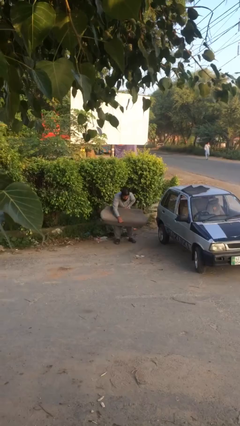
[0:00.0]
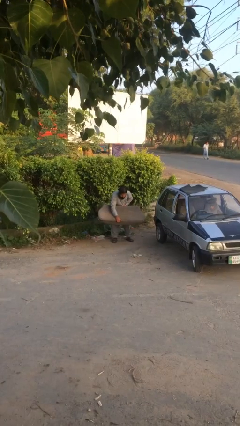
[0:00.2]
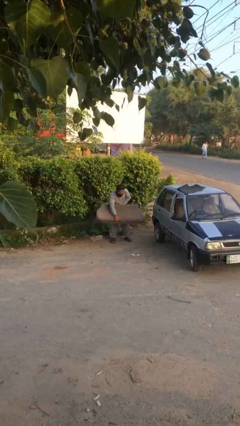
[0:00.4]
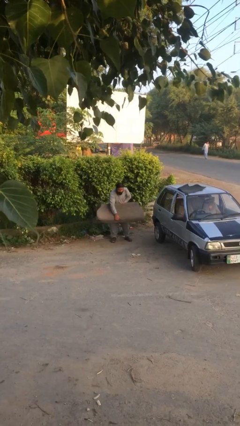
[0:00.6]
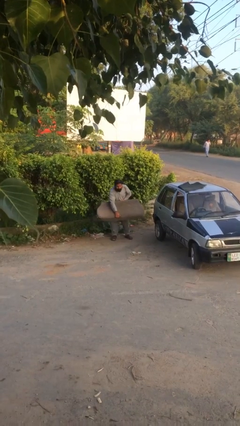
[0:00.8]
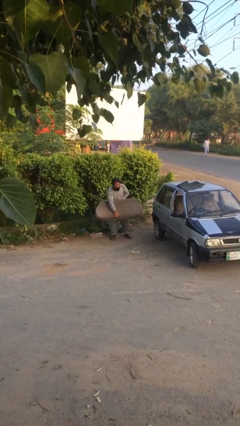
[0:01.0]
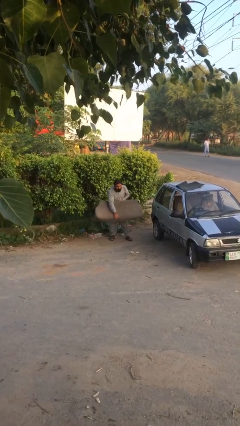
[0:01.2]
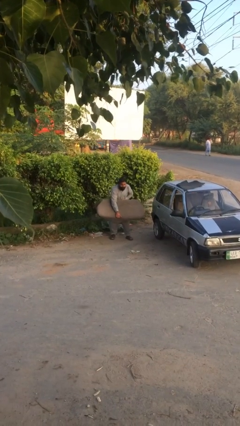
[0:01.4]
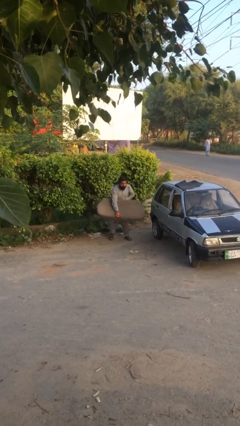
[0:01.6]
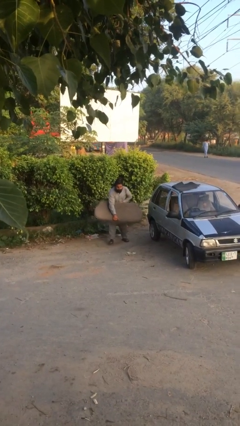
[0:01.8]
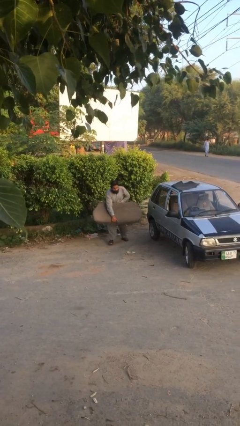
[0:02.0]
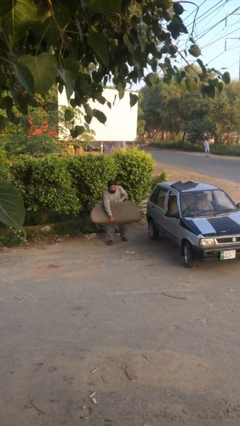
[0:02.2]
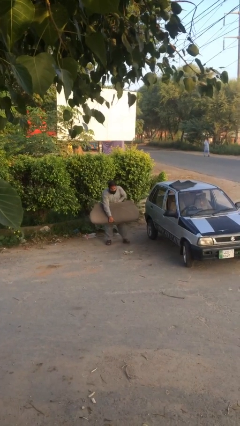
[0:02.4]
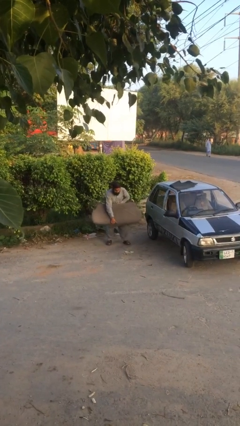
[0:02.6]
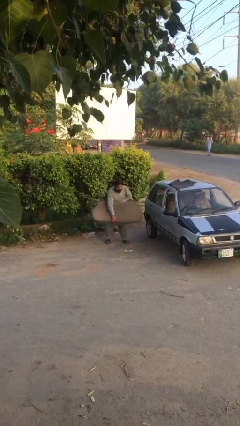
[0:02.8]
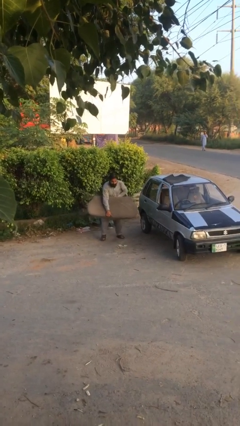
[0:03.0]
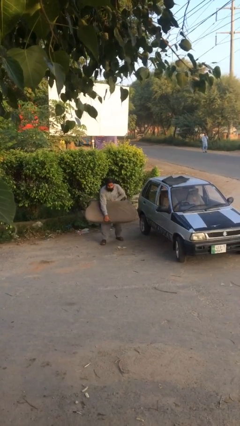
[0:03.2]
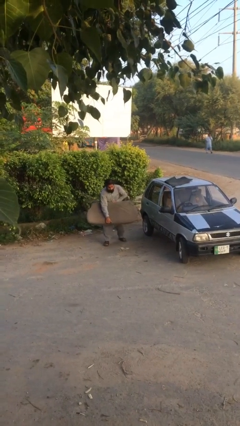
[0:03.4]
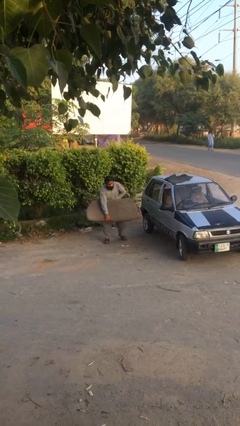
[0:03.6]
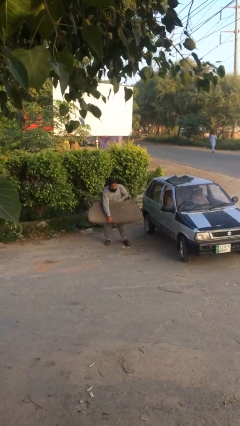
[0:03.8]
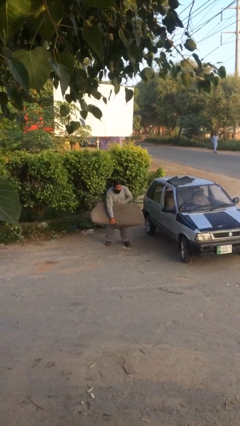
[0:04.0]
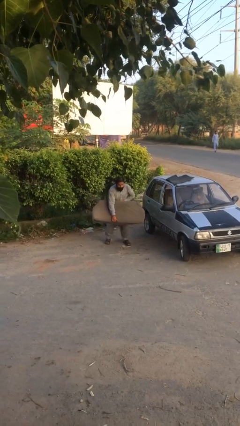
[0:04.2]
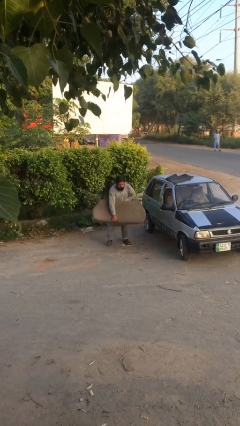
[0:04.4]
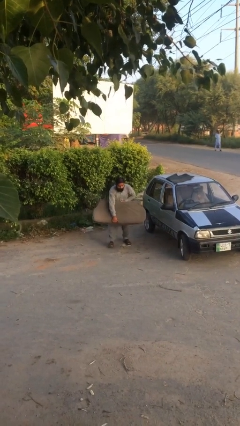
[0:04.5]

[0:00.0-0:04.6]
person carries heavy object

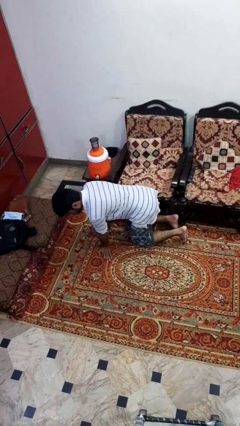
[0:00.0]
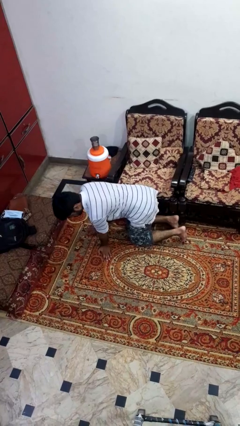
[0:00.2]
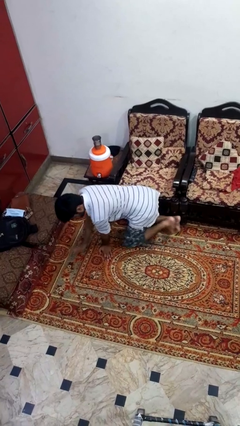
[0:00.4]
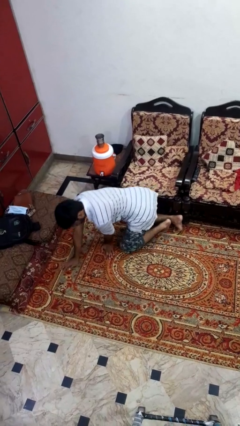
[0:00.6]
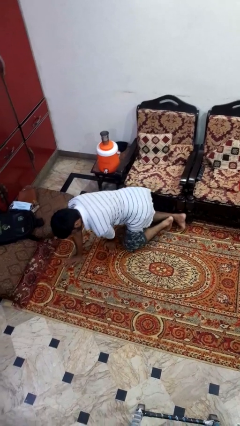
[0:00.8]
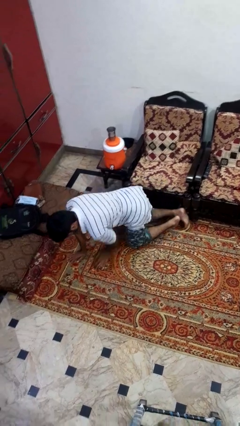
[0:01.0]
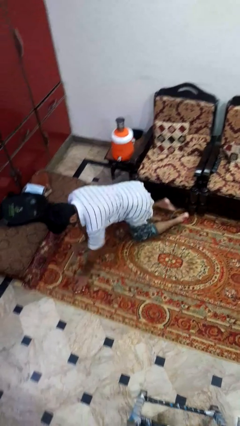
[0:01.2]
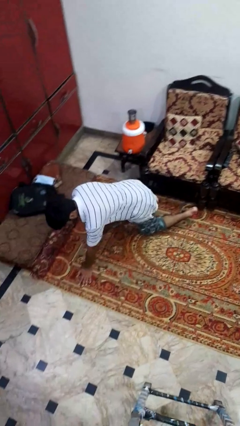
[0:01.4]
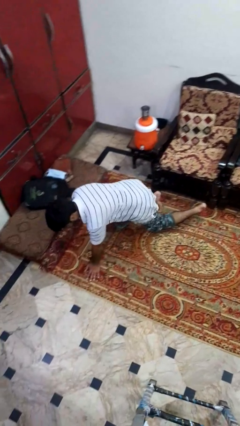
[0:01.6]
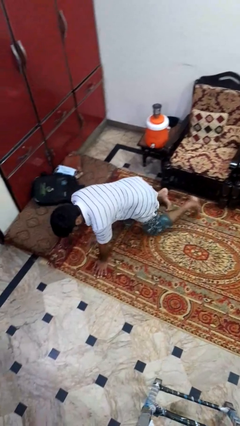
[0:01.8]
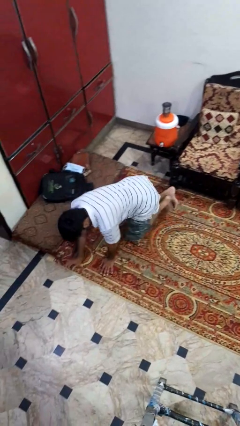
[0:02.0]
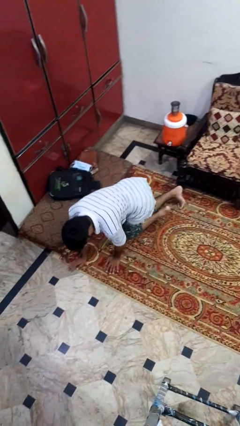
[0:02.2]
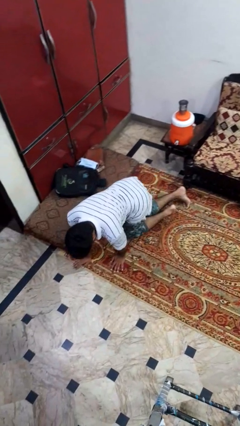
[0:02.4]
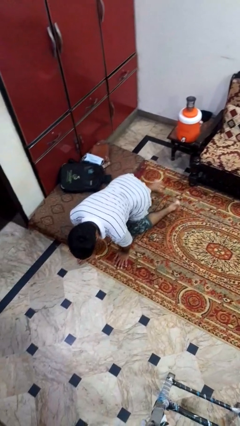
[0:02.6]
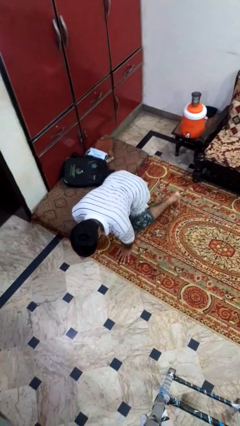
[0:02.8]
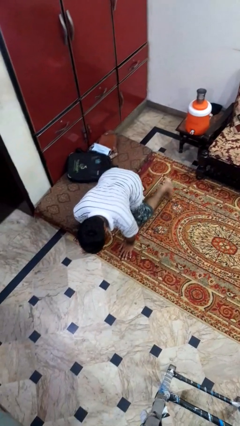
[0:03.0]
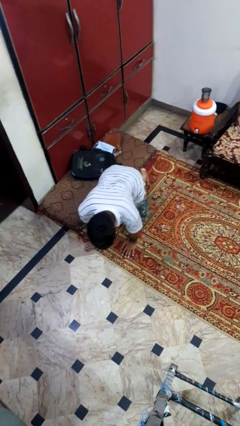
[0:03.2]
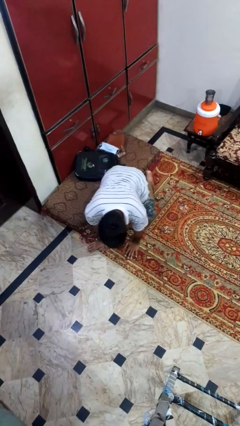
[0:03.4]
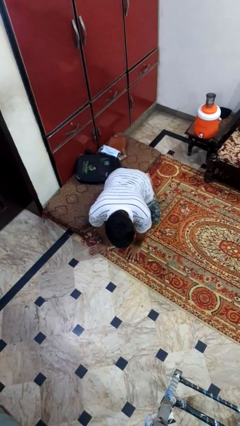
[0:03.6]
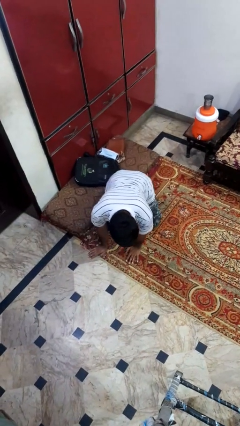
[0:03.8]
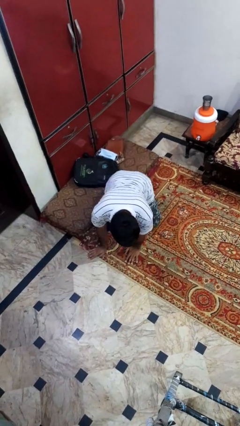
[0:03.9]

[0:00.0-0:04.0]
person crawls

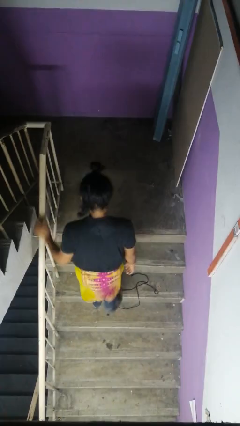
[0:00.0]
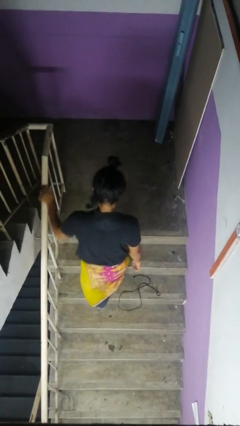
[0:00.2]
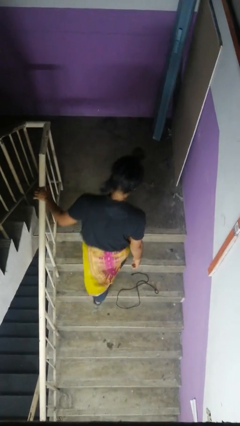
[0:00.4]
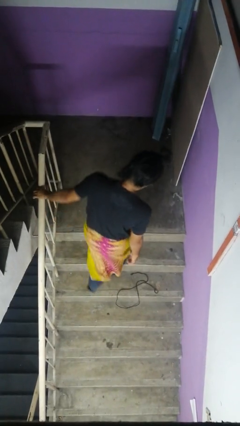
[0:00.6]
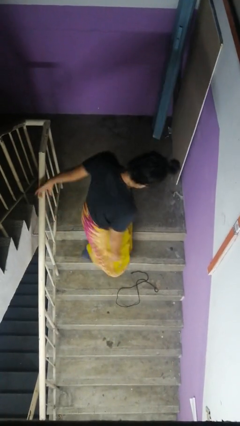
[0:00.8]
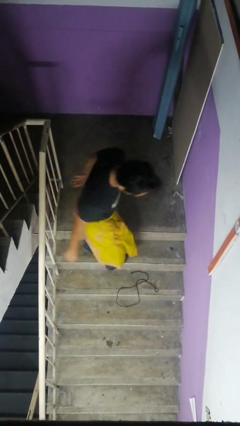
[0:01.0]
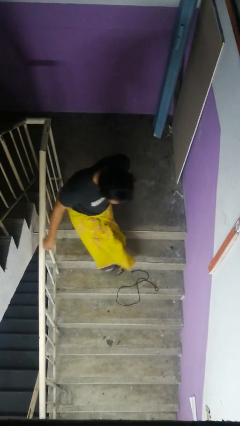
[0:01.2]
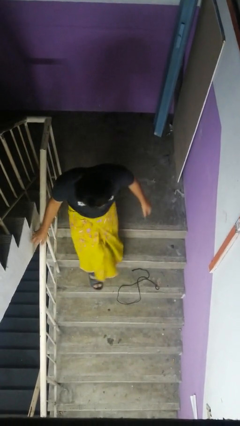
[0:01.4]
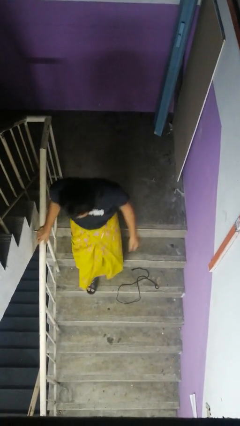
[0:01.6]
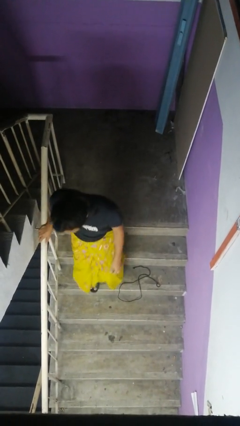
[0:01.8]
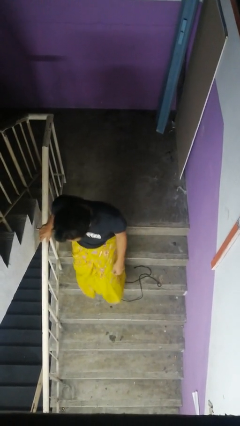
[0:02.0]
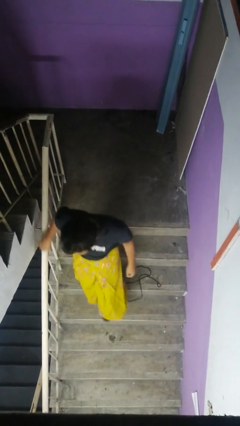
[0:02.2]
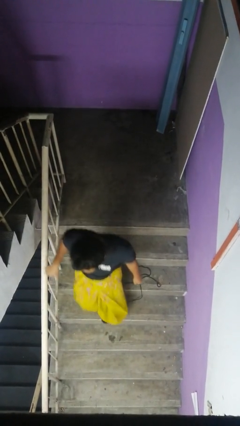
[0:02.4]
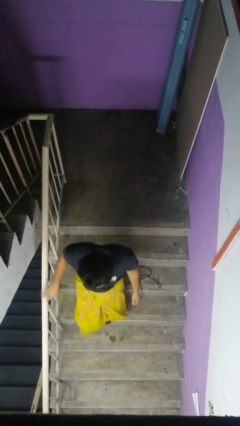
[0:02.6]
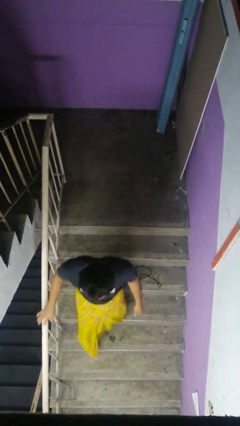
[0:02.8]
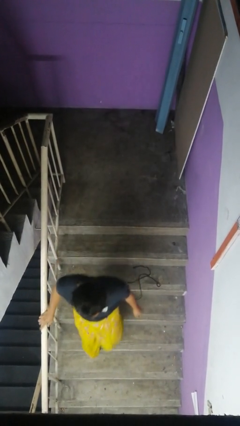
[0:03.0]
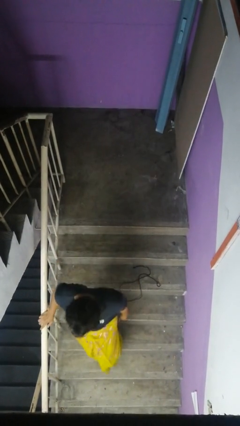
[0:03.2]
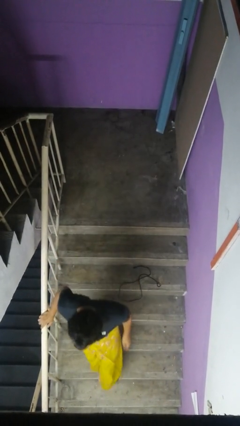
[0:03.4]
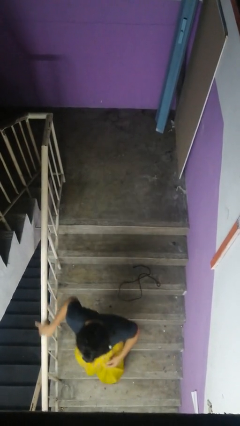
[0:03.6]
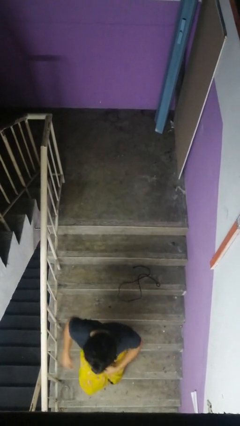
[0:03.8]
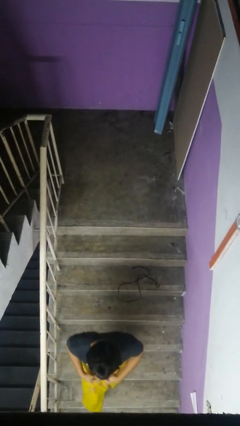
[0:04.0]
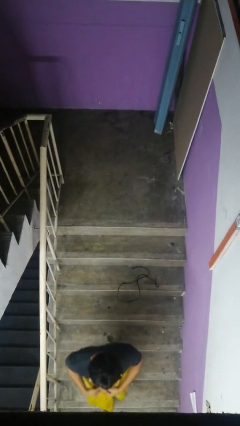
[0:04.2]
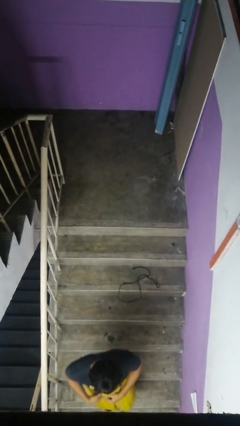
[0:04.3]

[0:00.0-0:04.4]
person climbs down stairs

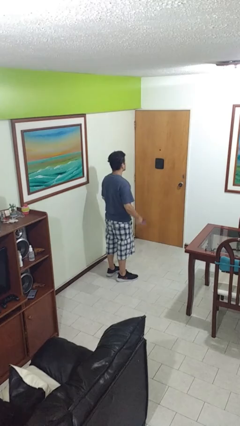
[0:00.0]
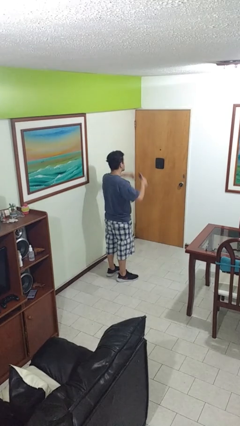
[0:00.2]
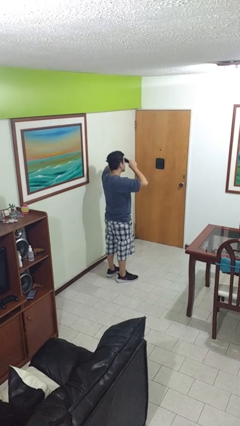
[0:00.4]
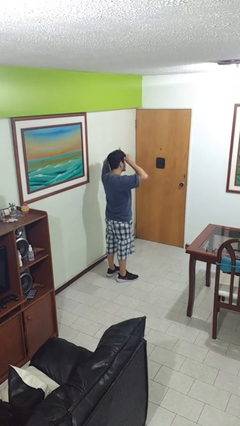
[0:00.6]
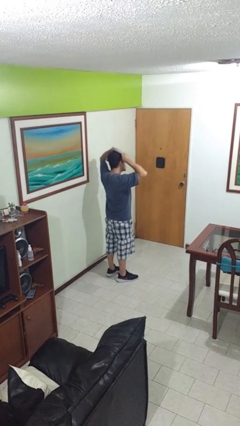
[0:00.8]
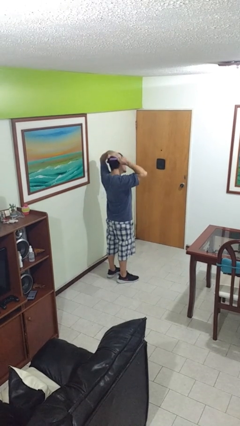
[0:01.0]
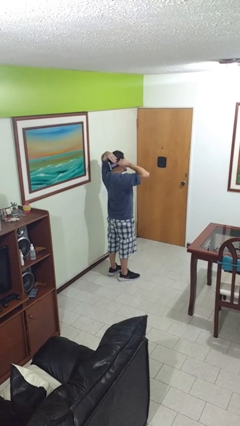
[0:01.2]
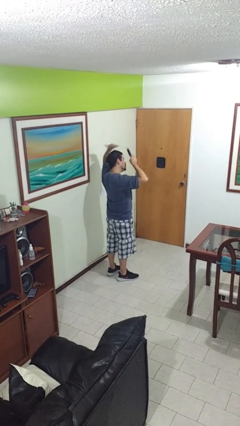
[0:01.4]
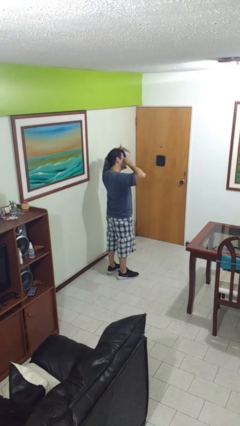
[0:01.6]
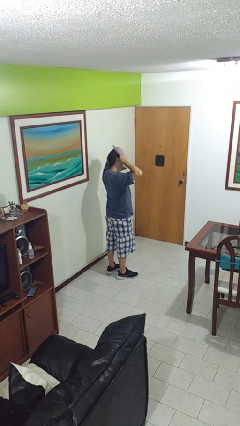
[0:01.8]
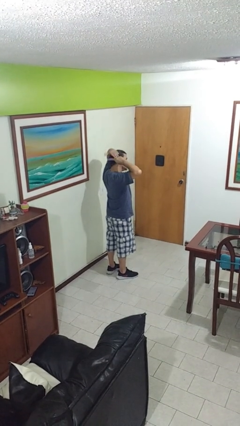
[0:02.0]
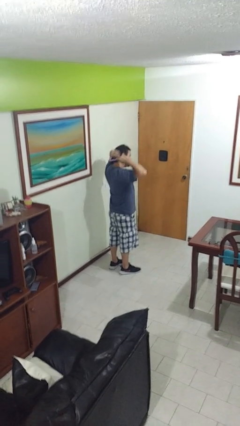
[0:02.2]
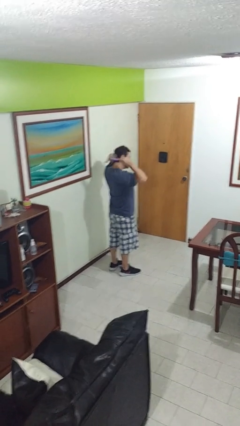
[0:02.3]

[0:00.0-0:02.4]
person brushes hair

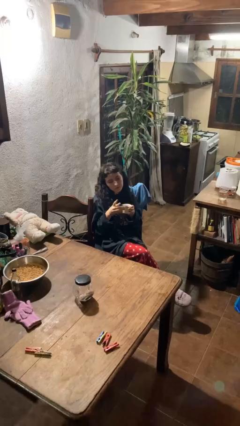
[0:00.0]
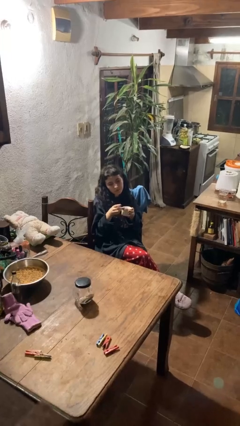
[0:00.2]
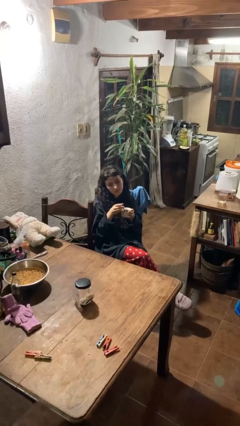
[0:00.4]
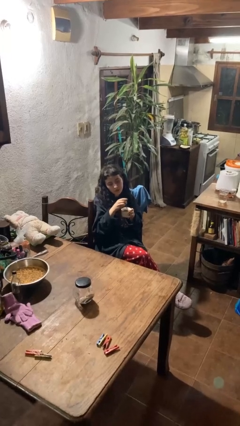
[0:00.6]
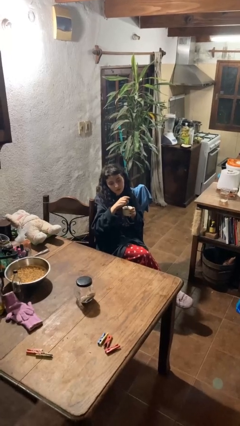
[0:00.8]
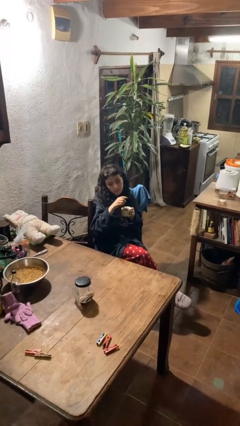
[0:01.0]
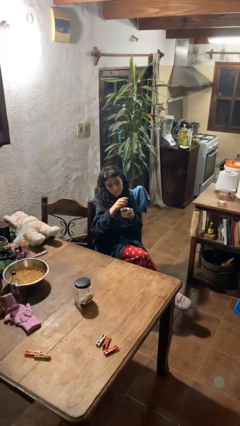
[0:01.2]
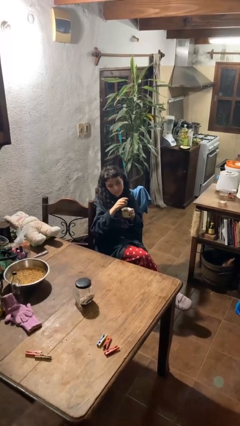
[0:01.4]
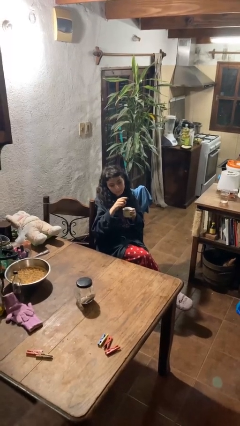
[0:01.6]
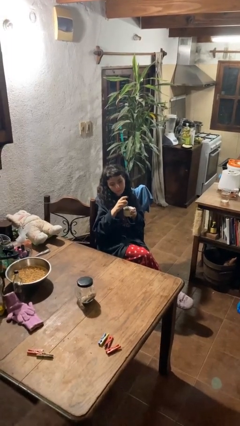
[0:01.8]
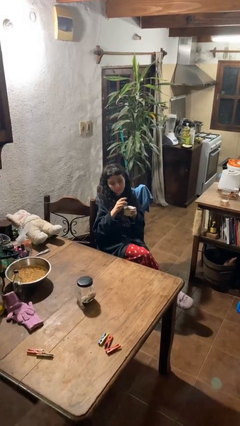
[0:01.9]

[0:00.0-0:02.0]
person stirs mug
